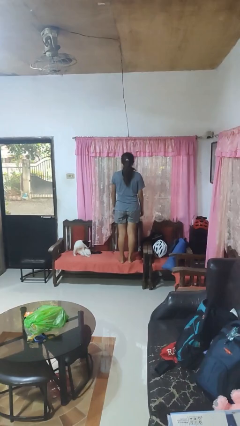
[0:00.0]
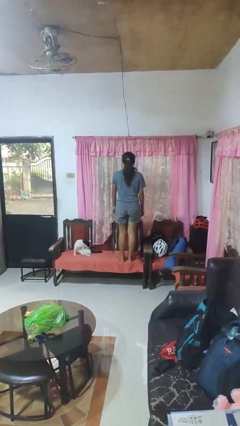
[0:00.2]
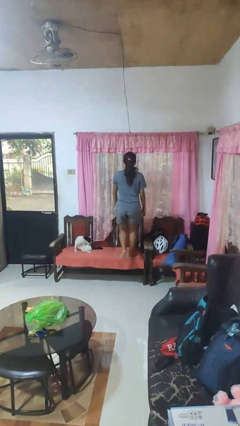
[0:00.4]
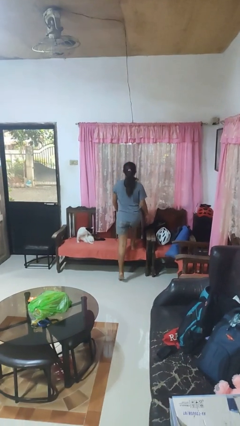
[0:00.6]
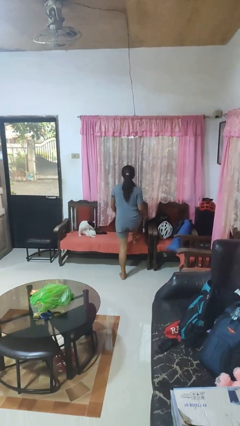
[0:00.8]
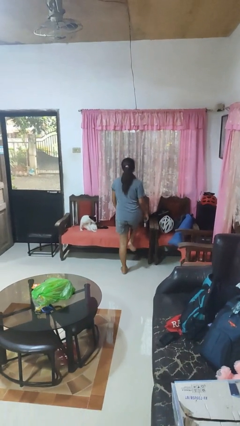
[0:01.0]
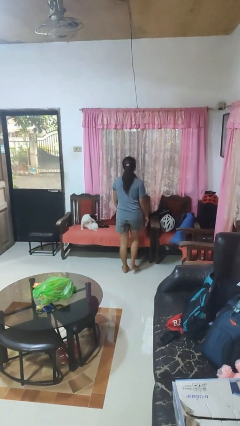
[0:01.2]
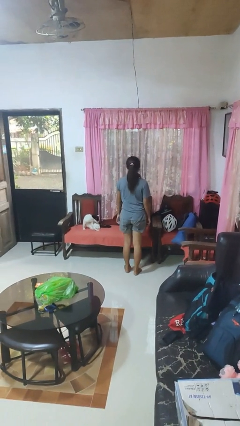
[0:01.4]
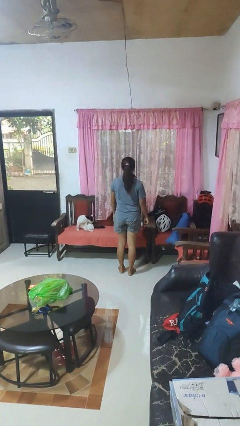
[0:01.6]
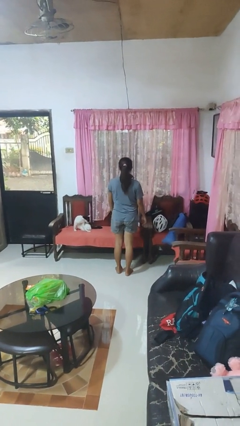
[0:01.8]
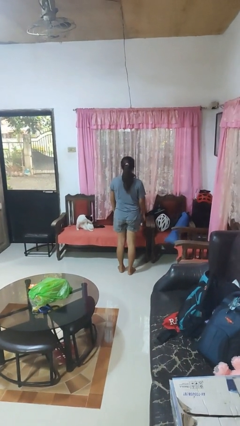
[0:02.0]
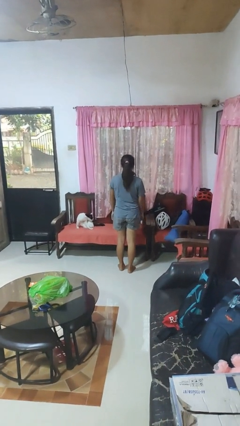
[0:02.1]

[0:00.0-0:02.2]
person climbs off chair

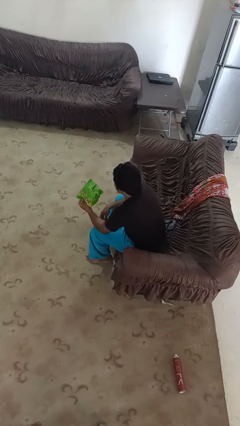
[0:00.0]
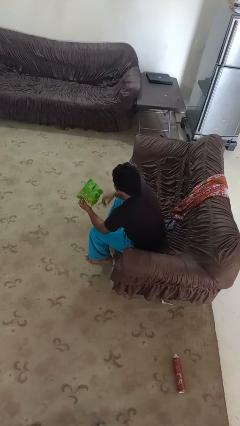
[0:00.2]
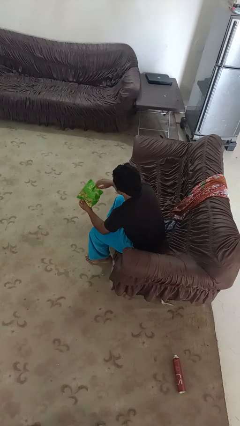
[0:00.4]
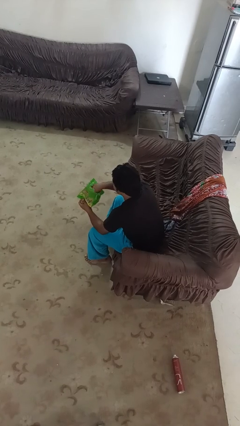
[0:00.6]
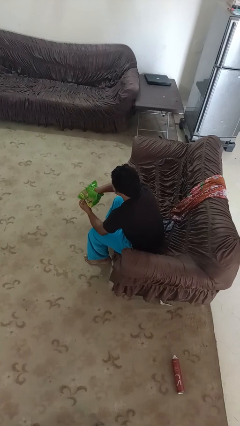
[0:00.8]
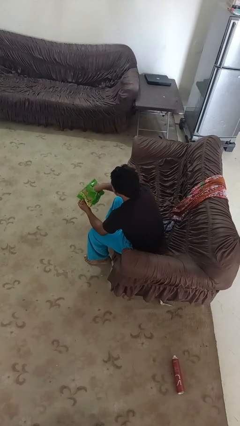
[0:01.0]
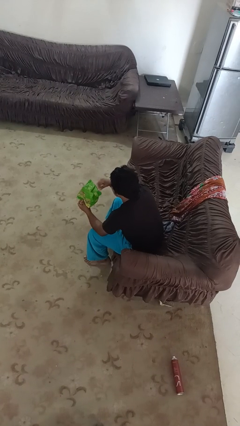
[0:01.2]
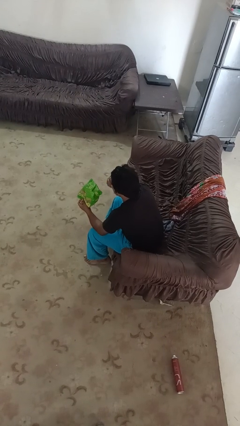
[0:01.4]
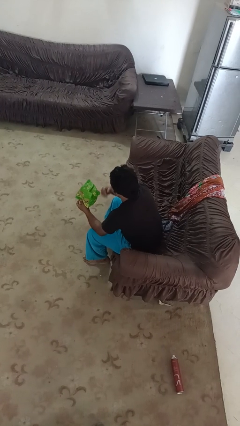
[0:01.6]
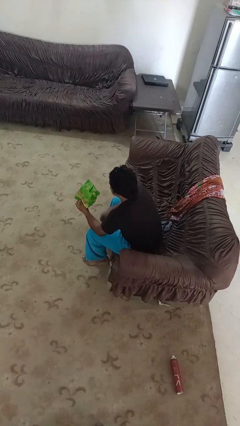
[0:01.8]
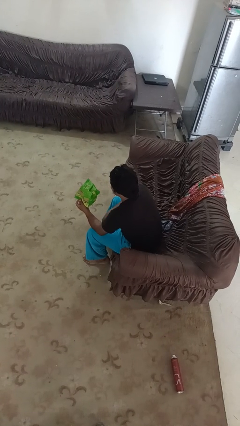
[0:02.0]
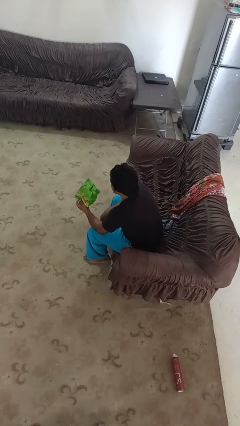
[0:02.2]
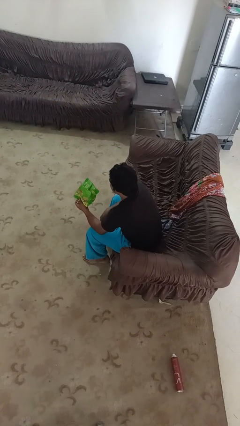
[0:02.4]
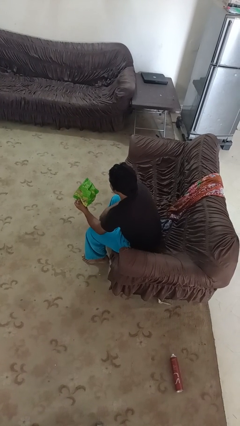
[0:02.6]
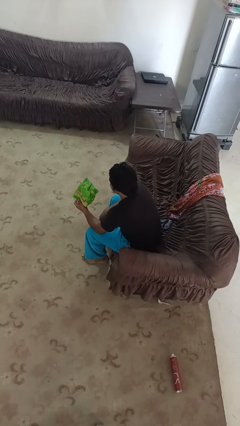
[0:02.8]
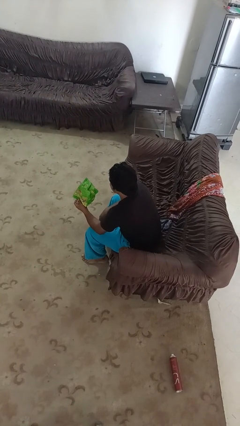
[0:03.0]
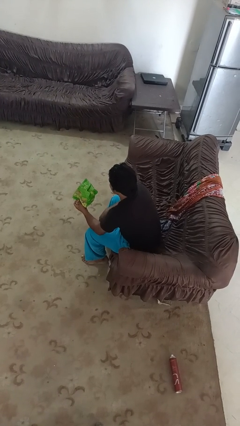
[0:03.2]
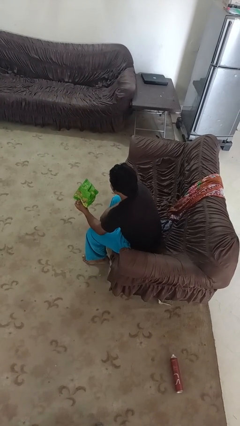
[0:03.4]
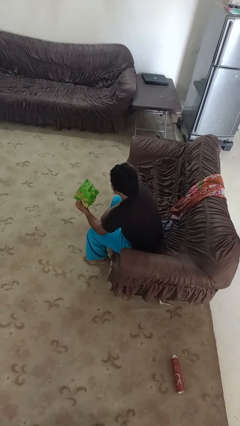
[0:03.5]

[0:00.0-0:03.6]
person eats snack from bag

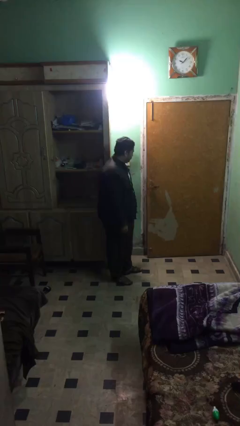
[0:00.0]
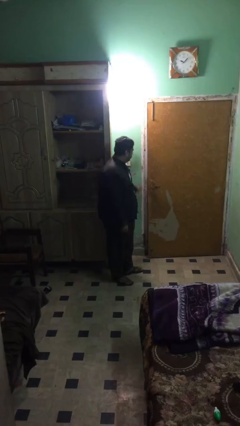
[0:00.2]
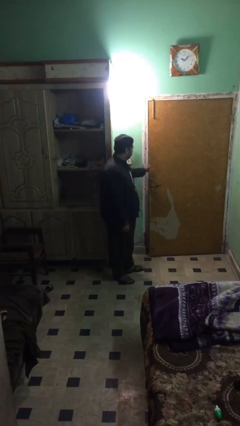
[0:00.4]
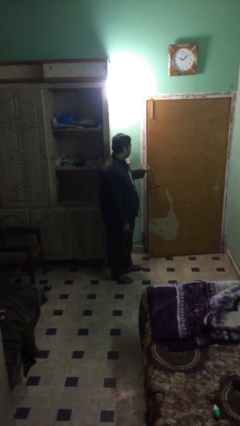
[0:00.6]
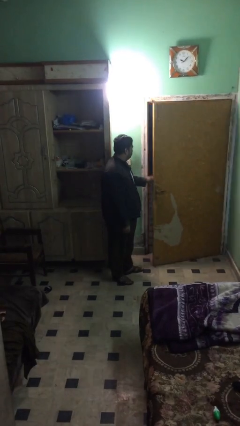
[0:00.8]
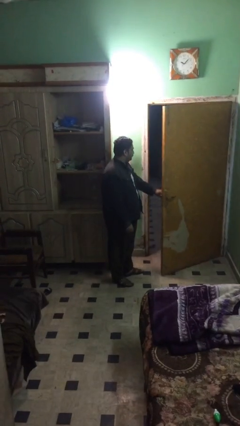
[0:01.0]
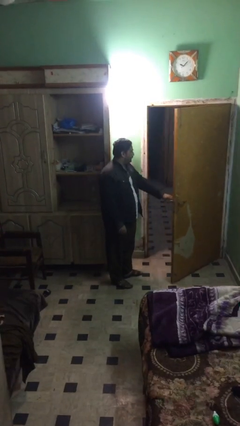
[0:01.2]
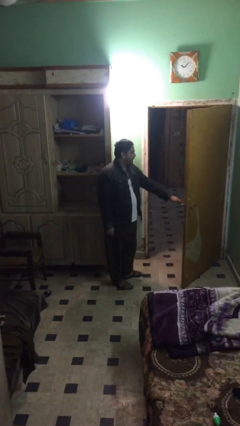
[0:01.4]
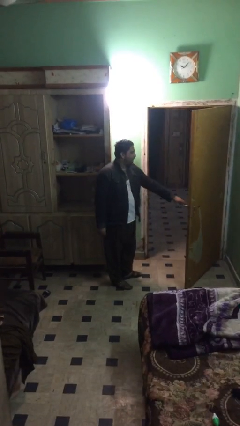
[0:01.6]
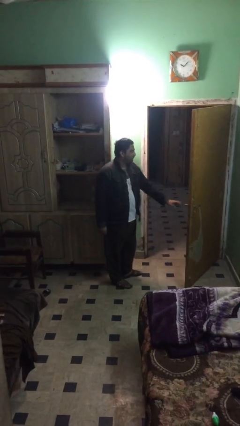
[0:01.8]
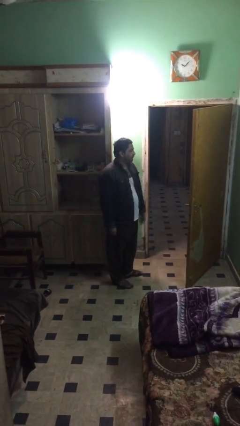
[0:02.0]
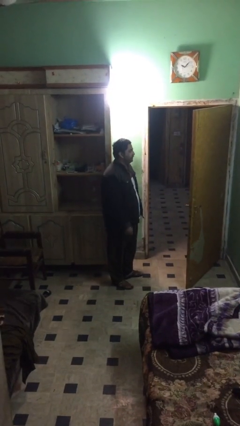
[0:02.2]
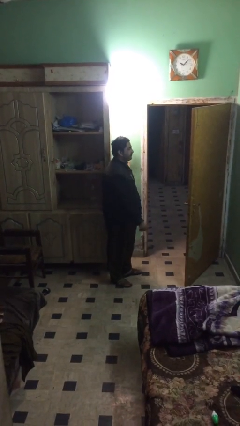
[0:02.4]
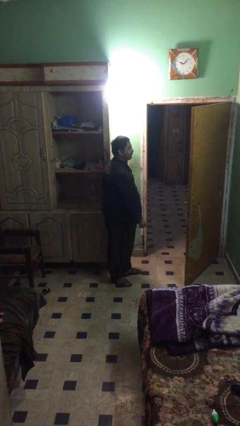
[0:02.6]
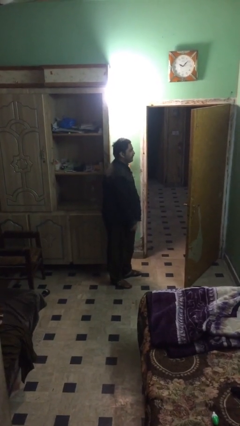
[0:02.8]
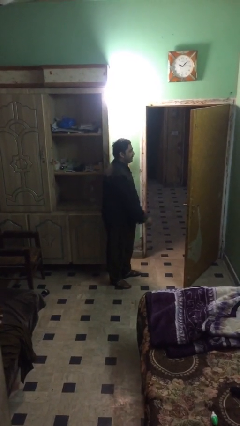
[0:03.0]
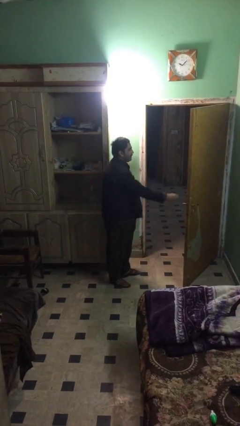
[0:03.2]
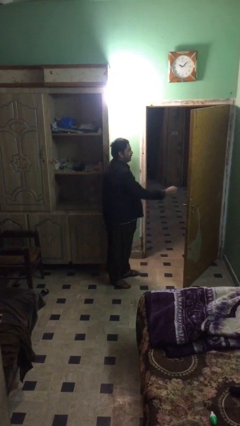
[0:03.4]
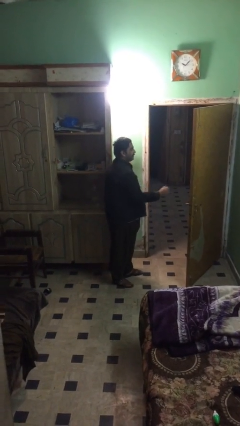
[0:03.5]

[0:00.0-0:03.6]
person opens facility door

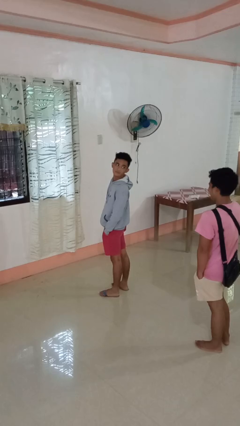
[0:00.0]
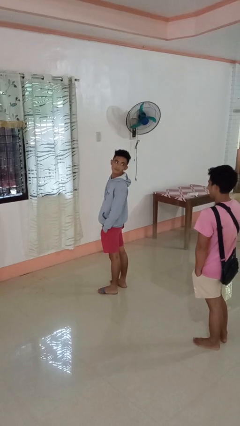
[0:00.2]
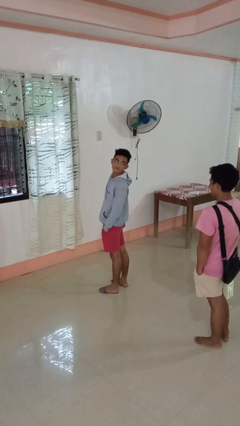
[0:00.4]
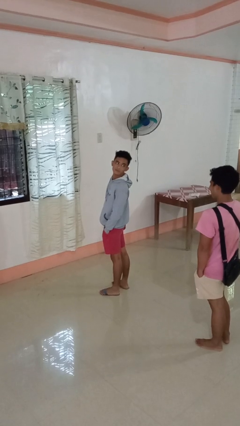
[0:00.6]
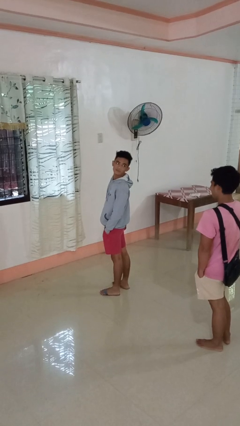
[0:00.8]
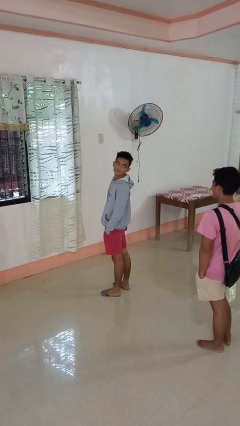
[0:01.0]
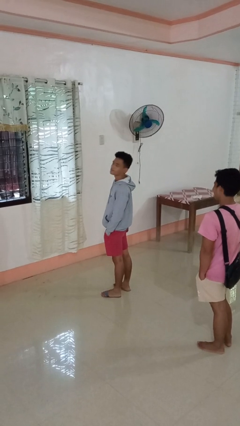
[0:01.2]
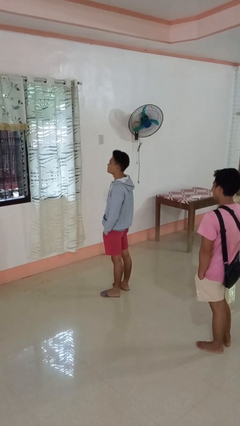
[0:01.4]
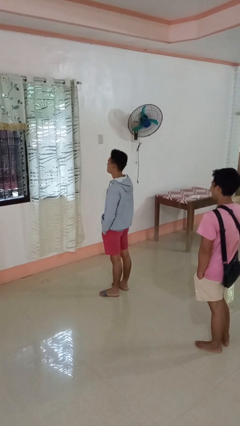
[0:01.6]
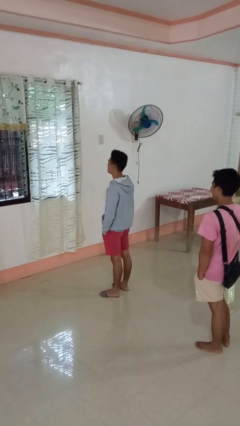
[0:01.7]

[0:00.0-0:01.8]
person looks over shoulder

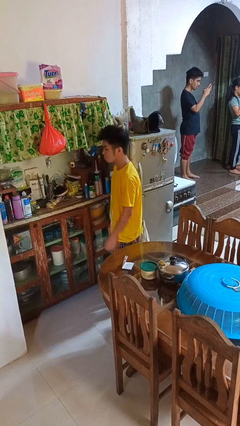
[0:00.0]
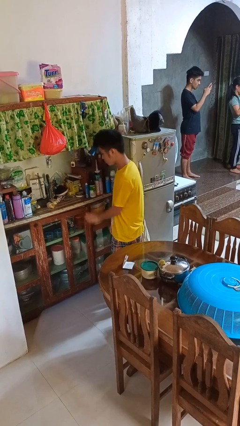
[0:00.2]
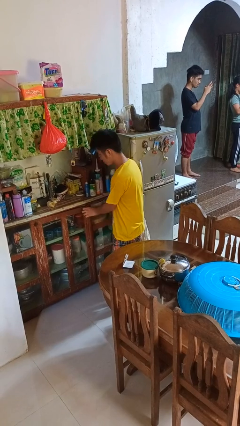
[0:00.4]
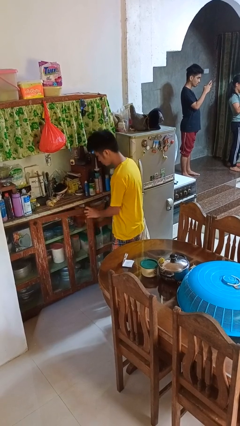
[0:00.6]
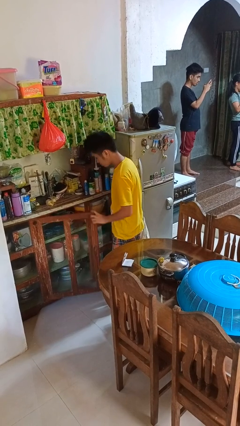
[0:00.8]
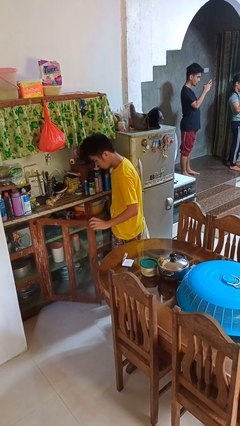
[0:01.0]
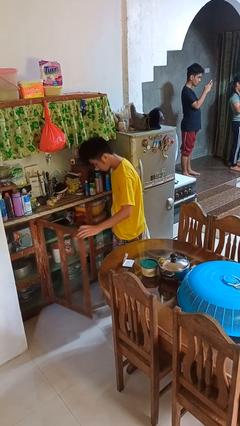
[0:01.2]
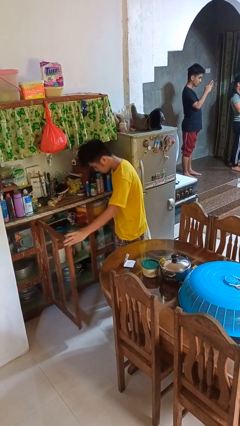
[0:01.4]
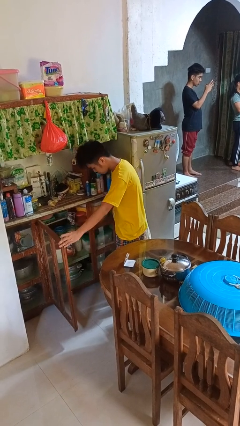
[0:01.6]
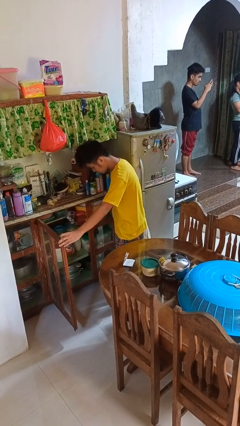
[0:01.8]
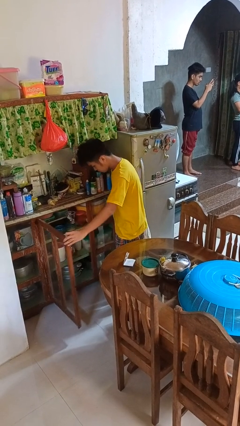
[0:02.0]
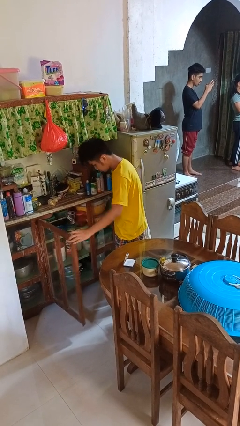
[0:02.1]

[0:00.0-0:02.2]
person opens cabinet

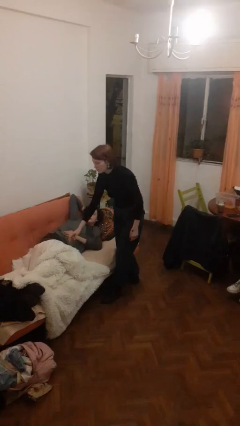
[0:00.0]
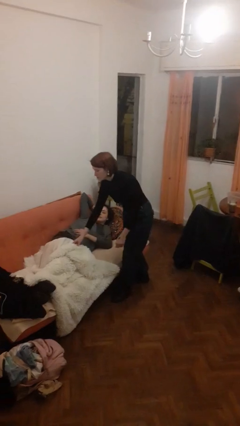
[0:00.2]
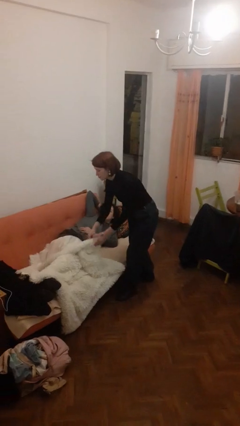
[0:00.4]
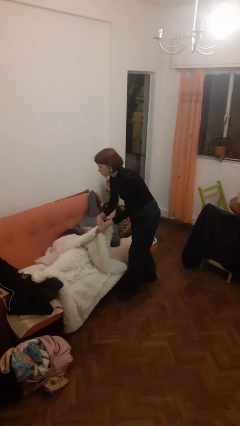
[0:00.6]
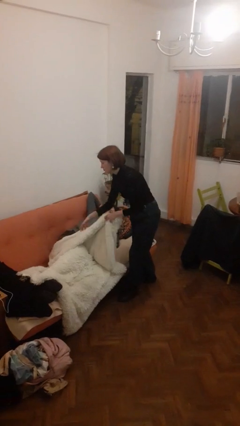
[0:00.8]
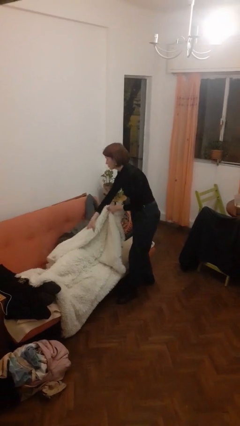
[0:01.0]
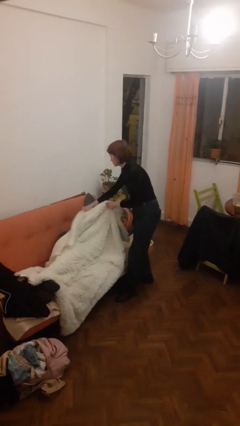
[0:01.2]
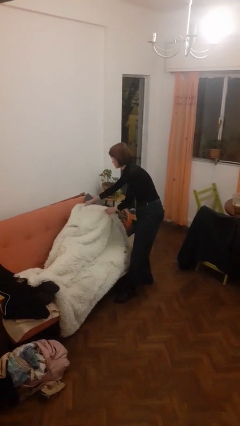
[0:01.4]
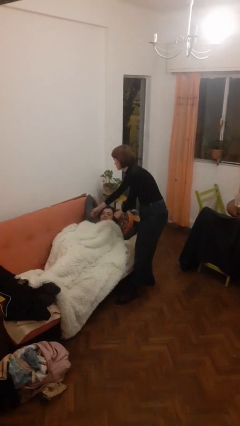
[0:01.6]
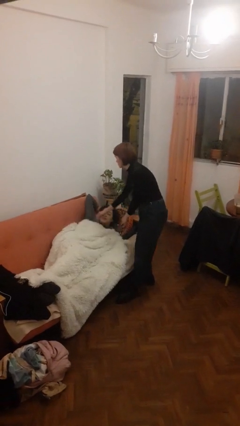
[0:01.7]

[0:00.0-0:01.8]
person covers friend with blanket

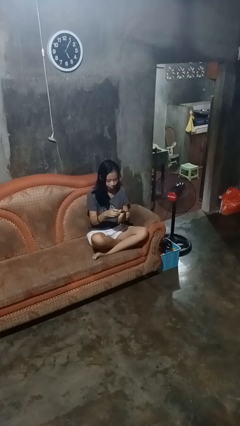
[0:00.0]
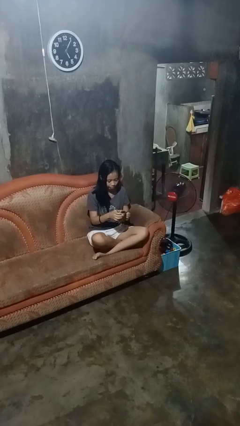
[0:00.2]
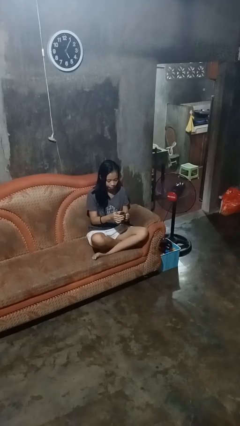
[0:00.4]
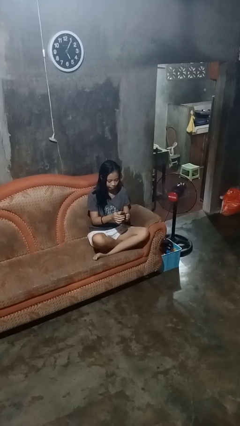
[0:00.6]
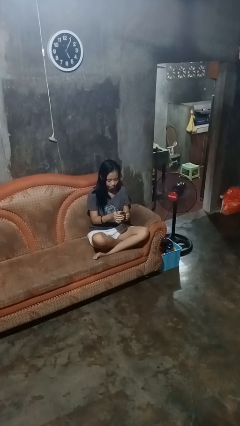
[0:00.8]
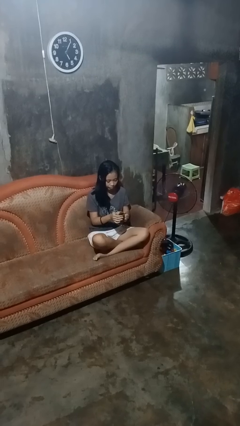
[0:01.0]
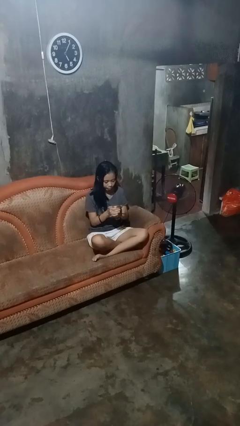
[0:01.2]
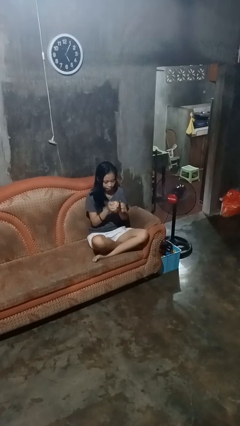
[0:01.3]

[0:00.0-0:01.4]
person drinks from mug
